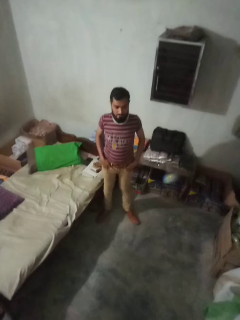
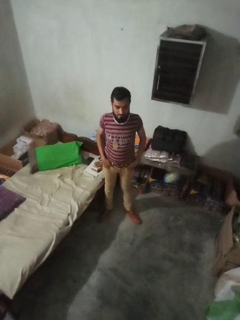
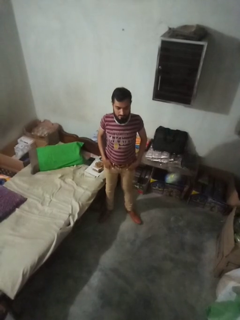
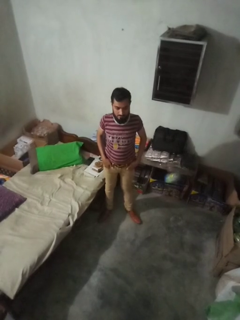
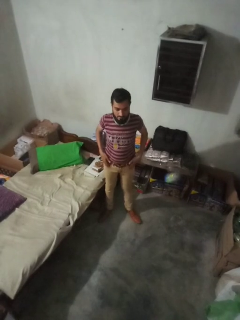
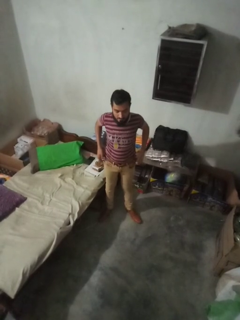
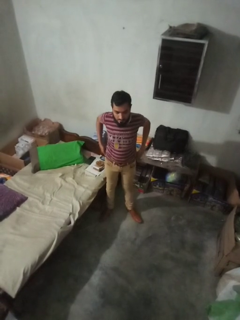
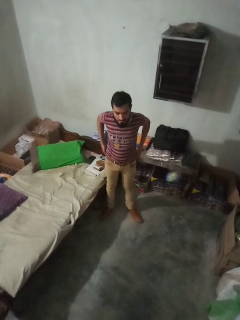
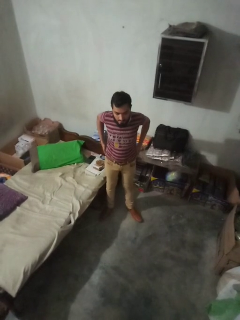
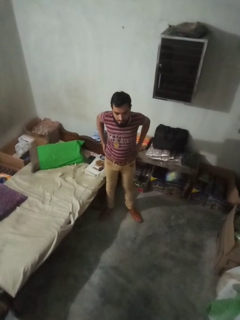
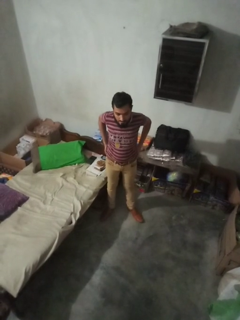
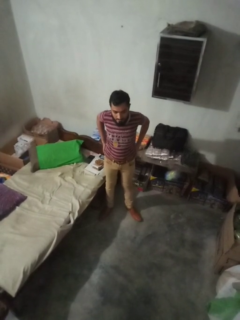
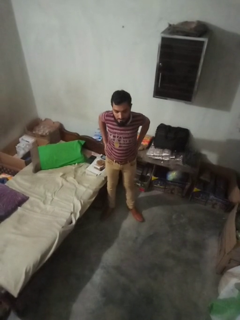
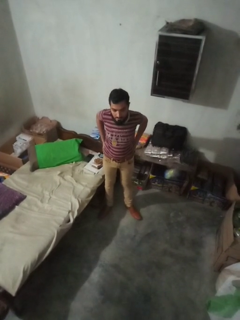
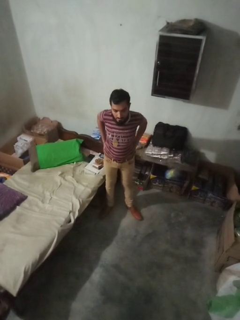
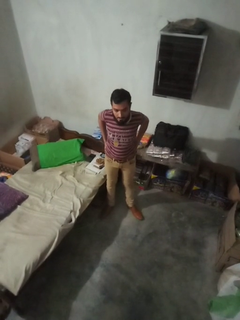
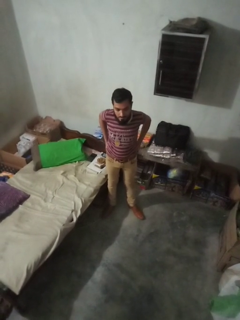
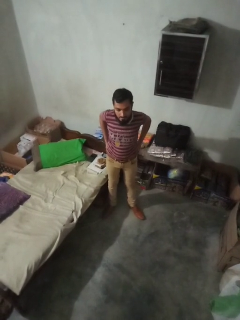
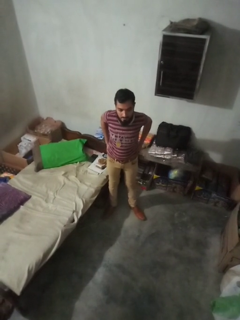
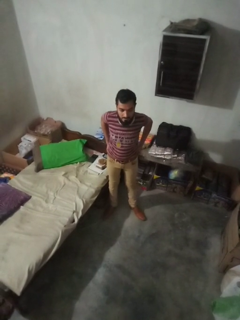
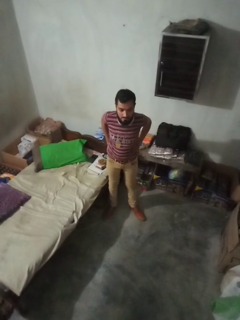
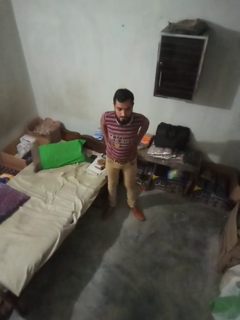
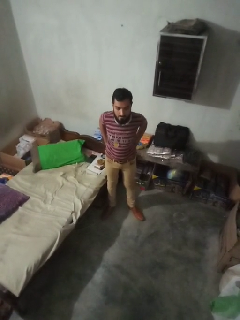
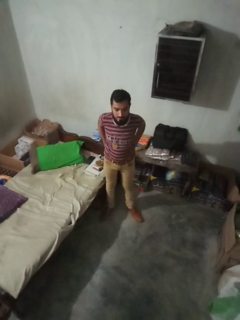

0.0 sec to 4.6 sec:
person puts hands in back pockets

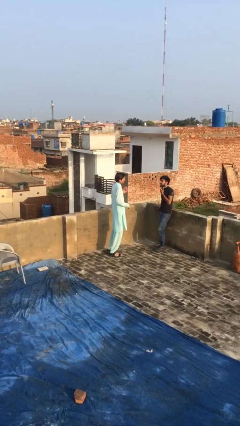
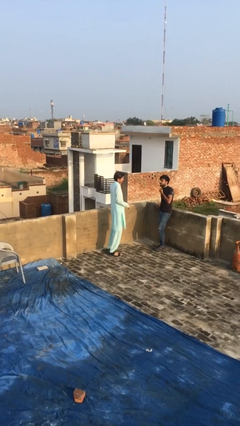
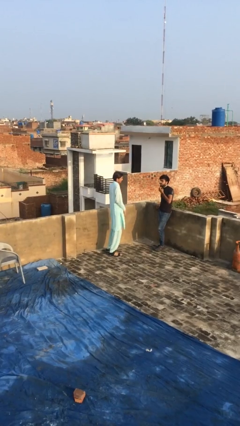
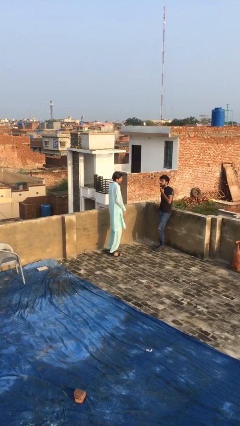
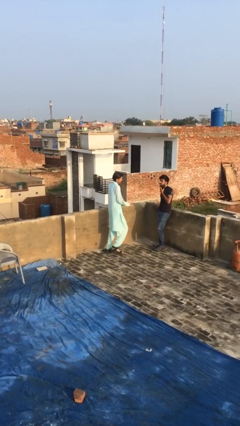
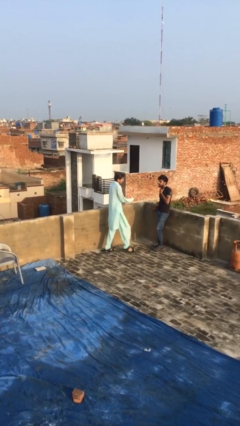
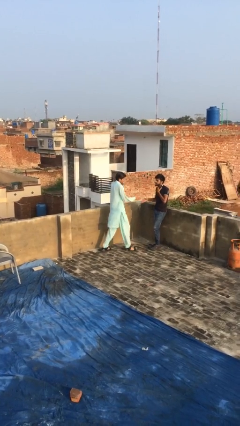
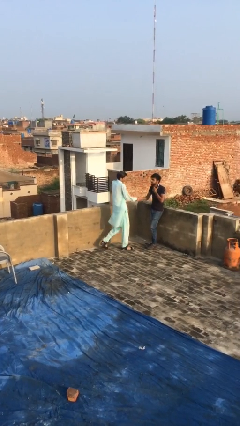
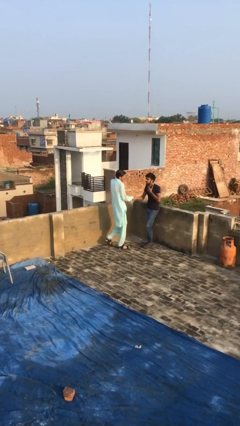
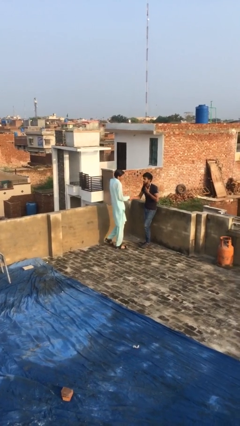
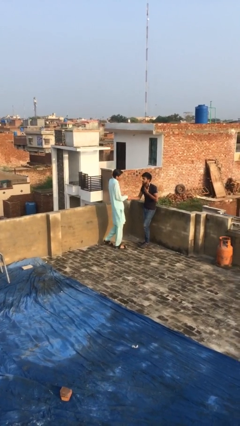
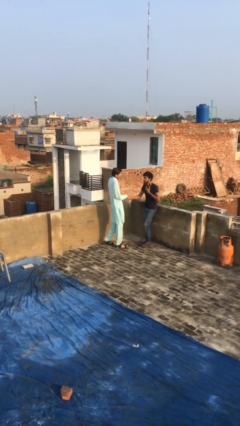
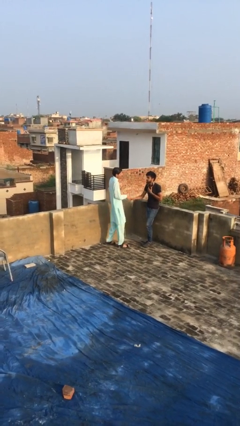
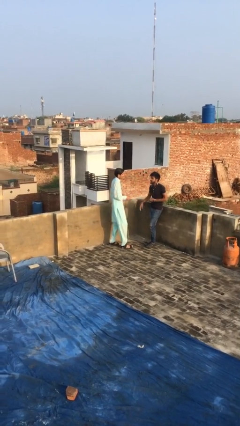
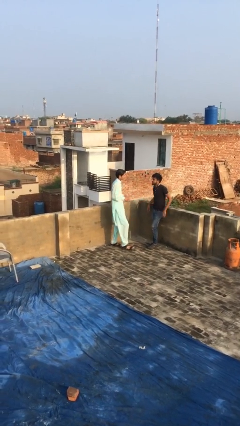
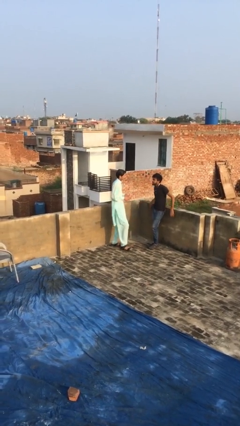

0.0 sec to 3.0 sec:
person shakes hand

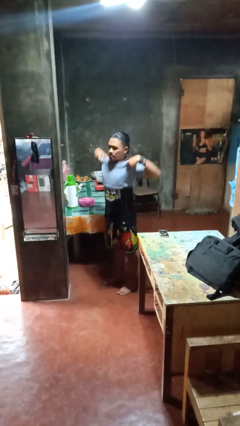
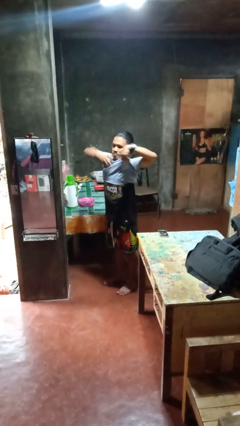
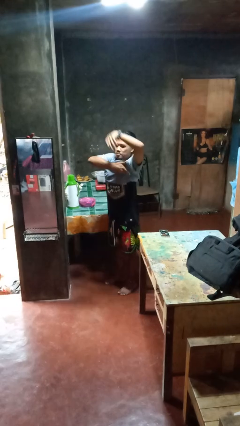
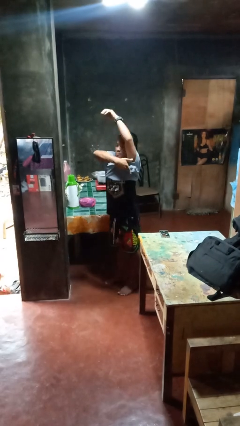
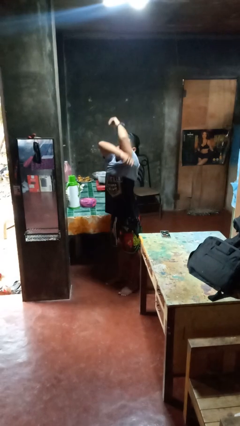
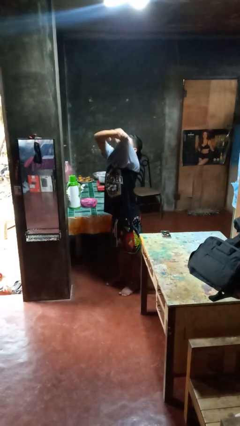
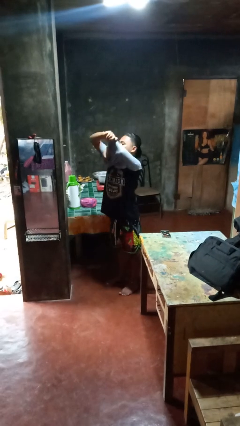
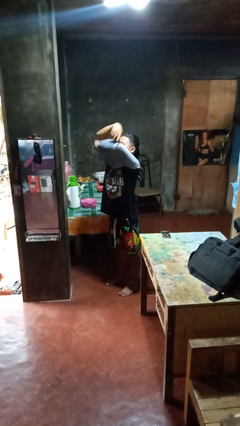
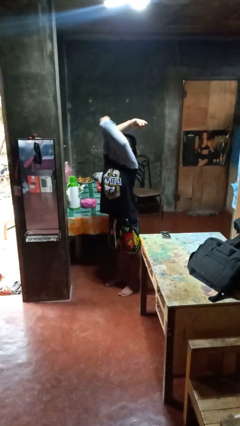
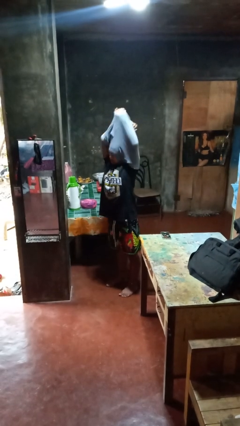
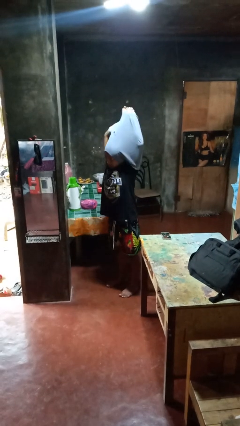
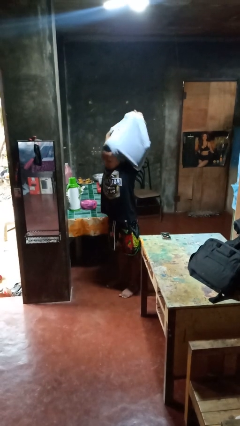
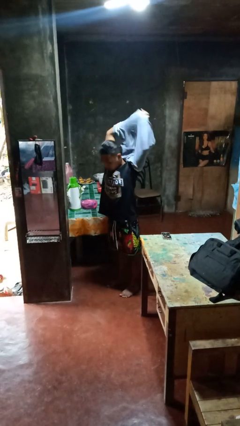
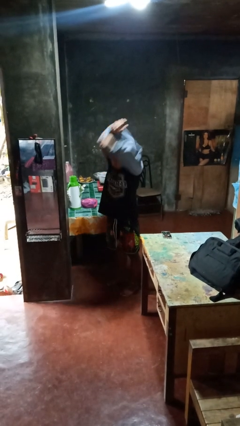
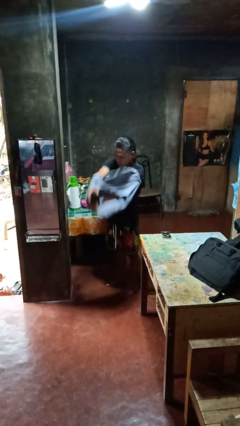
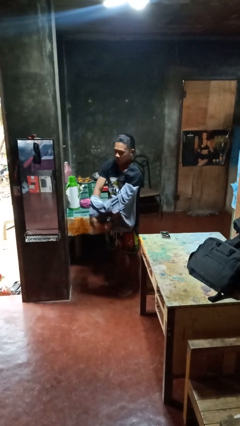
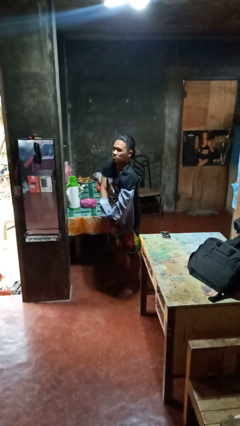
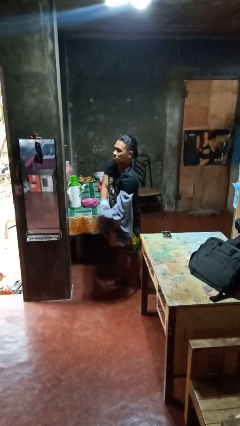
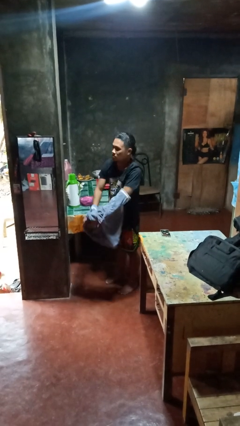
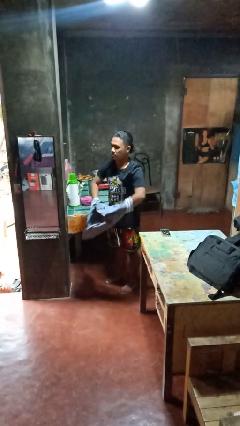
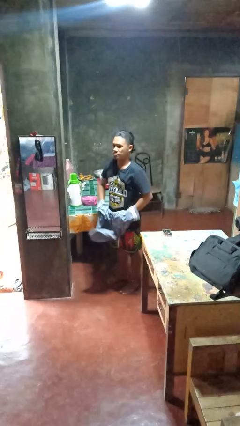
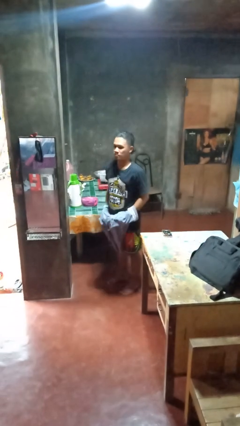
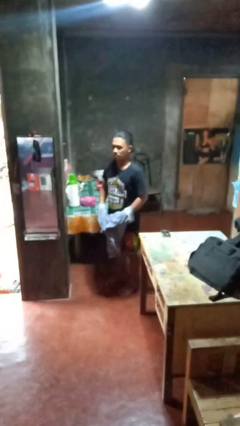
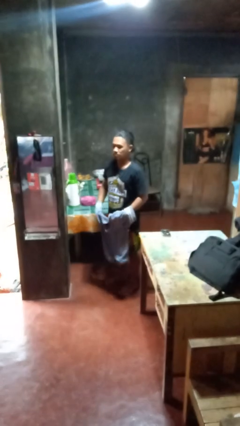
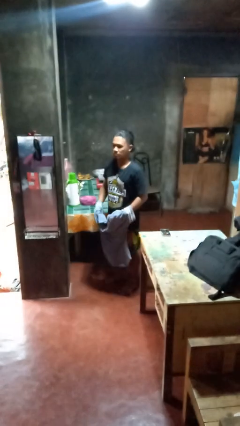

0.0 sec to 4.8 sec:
person takes off shirt

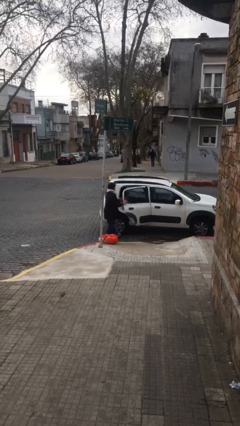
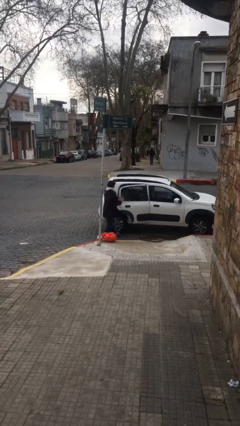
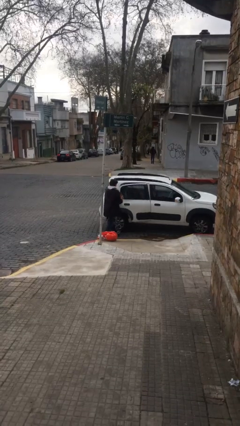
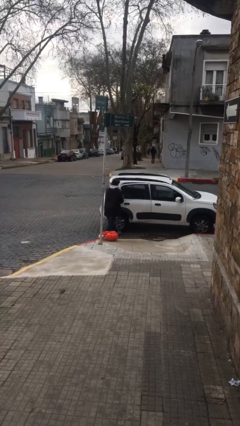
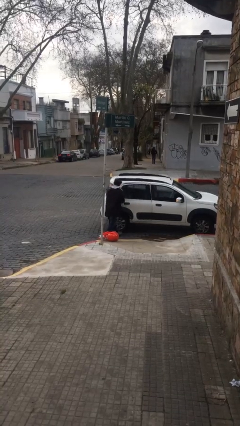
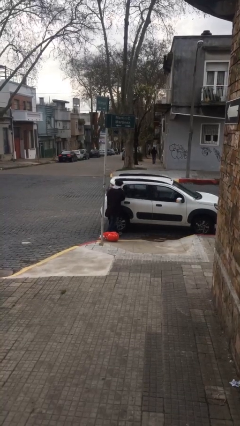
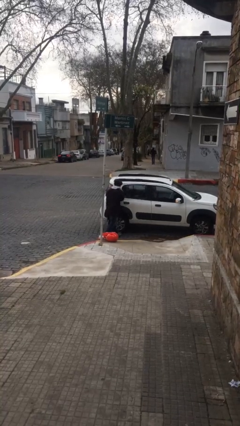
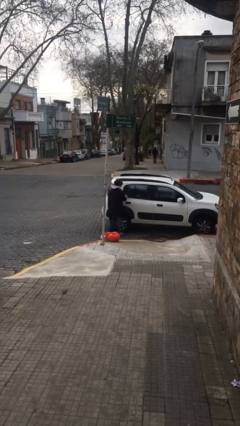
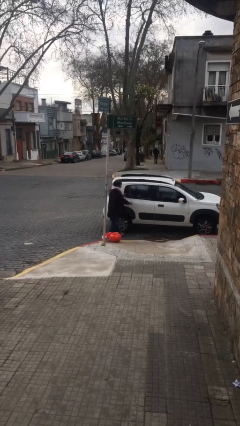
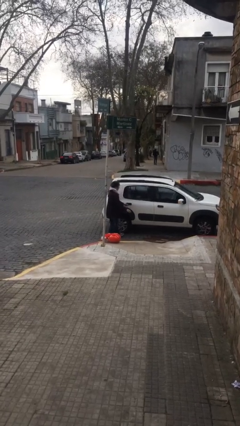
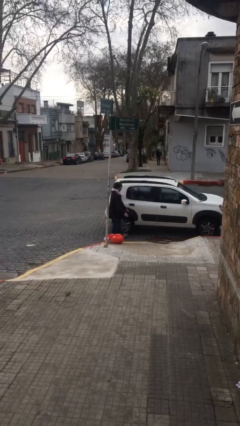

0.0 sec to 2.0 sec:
person closes car door

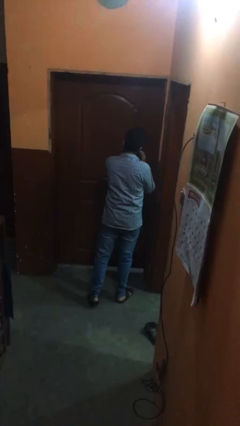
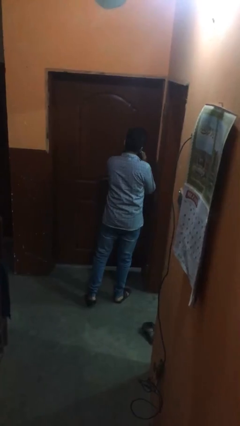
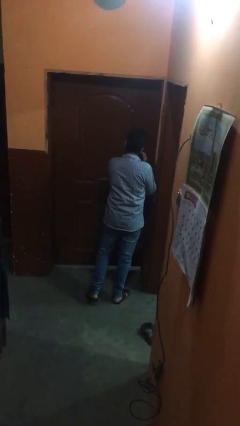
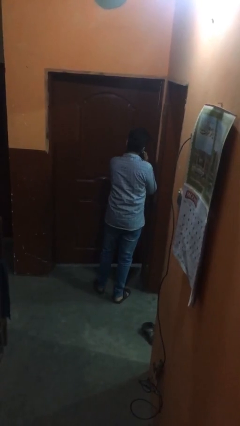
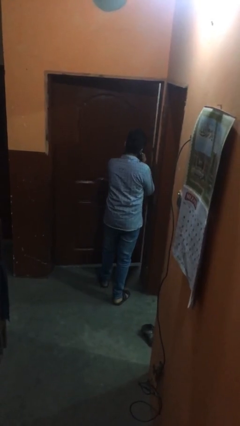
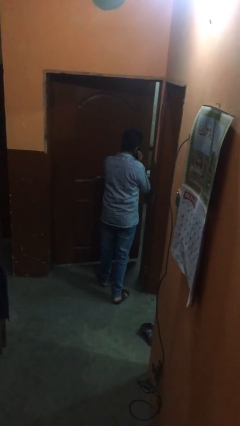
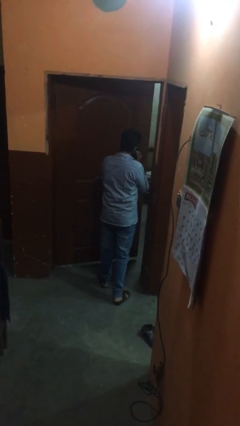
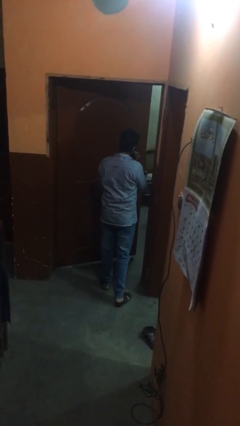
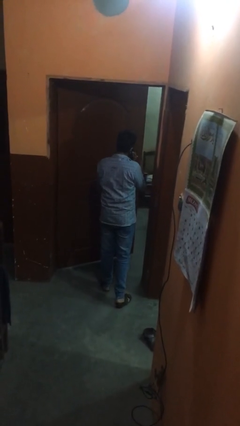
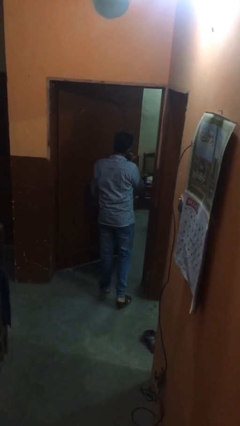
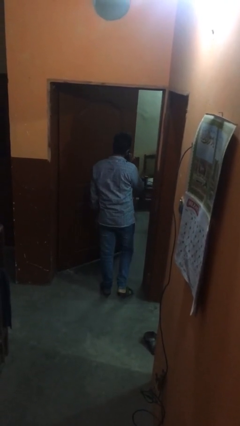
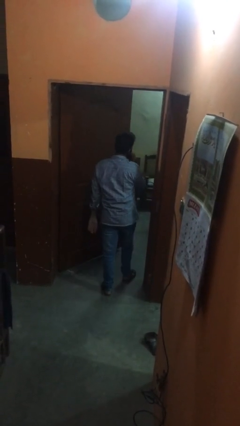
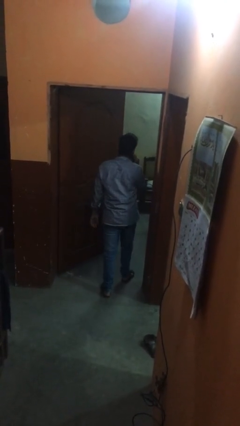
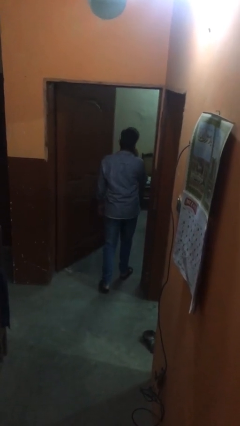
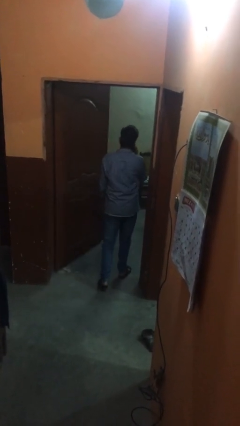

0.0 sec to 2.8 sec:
person opens facility door

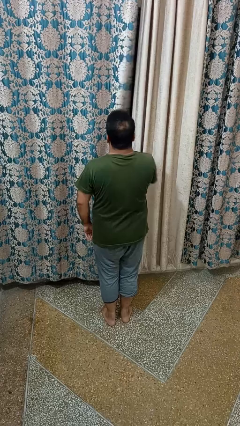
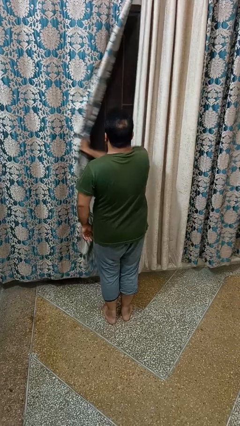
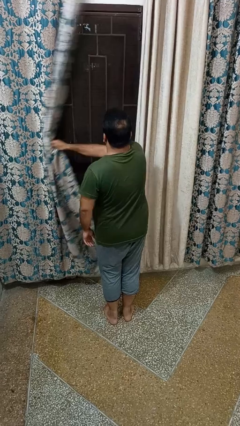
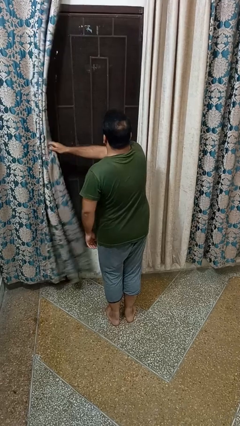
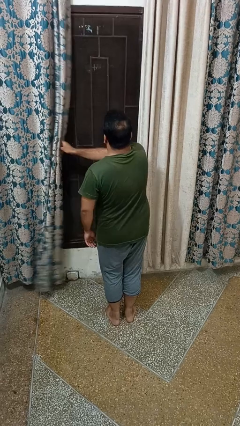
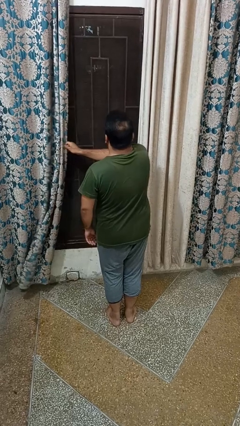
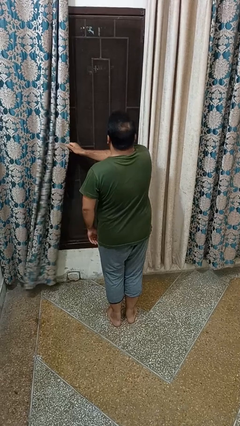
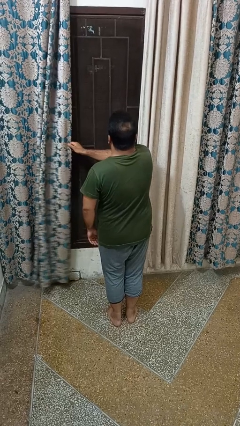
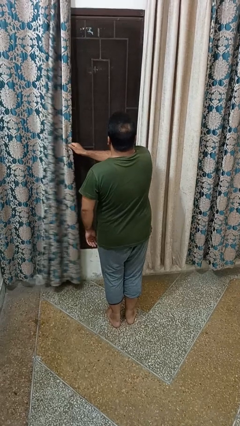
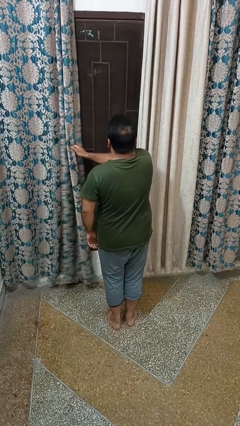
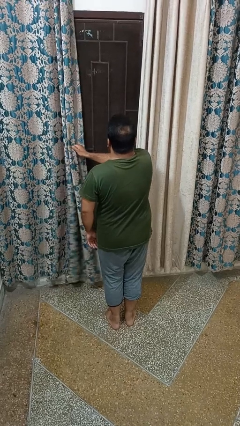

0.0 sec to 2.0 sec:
person opens curtains
